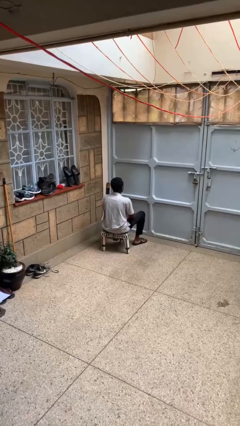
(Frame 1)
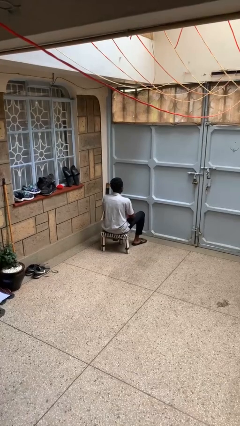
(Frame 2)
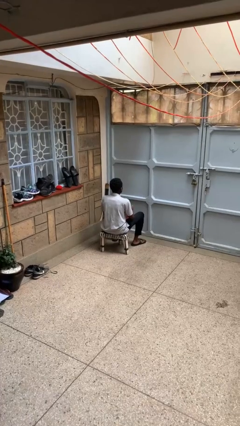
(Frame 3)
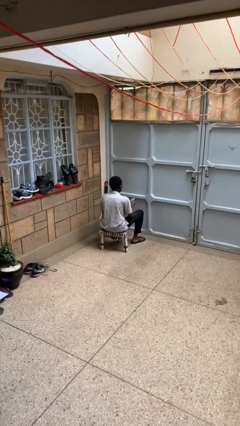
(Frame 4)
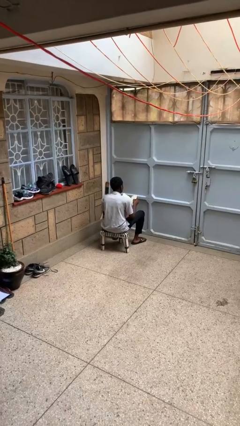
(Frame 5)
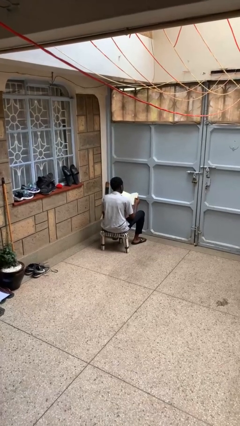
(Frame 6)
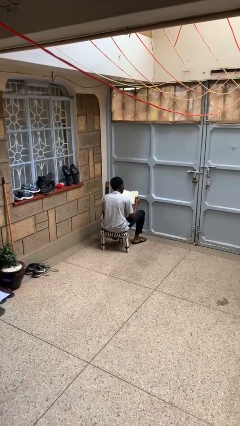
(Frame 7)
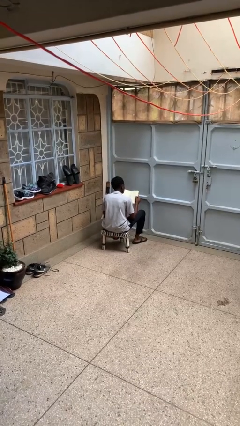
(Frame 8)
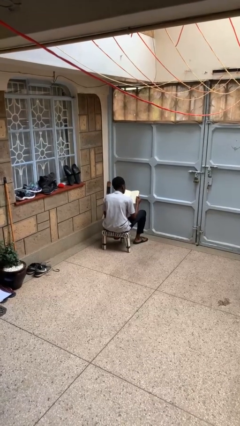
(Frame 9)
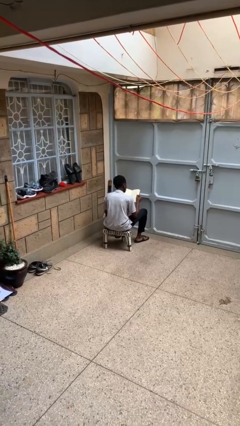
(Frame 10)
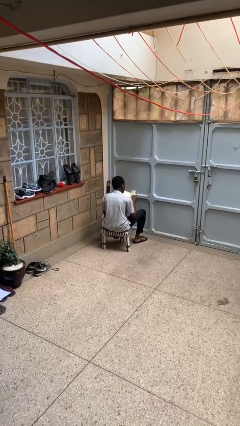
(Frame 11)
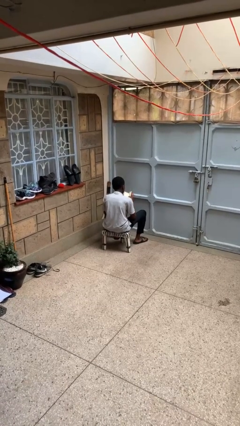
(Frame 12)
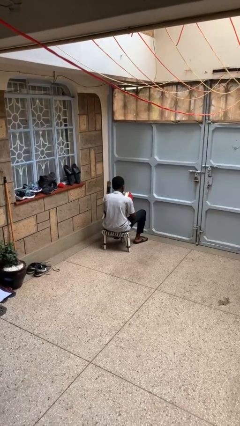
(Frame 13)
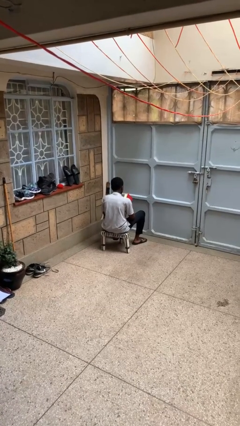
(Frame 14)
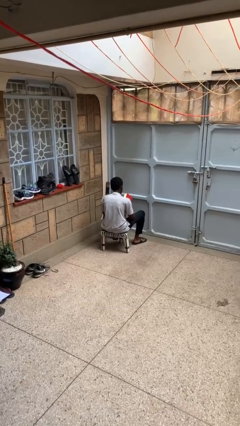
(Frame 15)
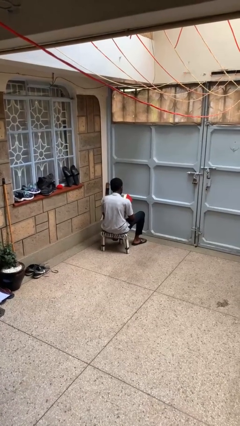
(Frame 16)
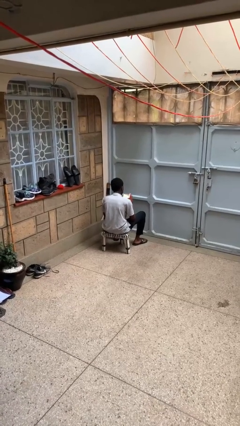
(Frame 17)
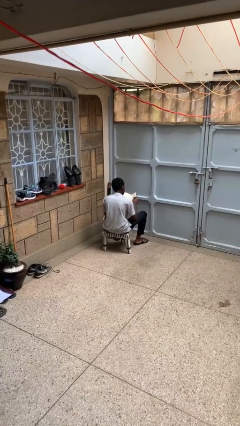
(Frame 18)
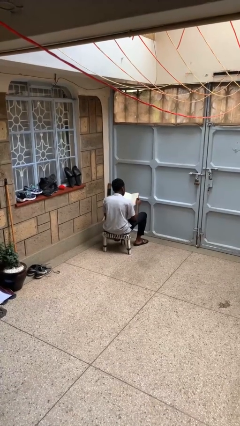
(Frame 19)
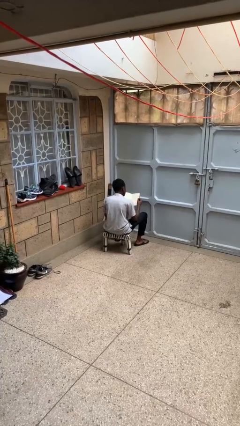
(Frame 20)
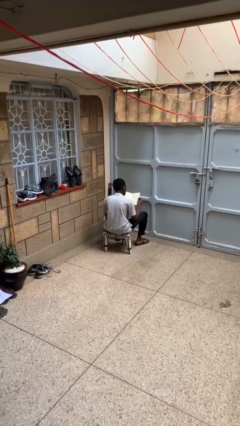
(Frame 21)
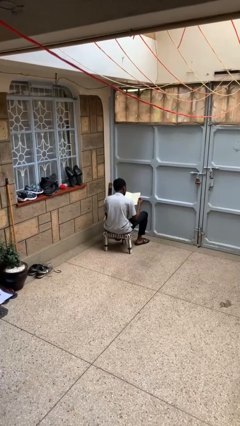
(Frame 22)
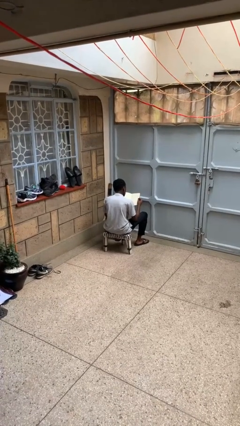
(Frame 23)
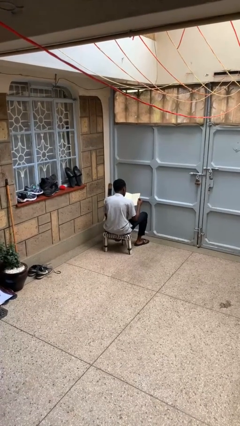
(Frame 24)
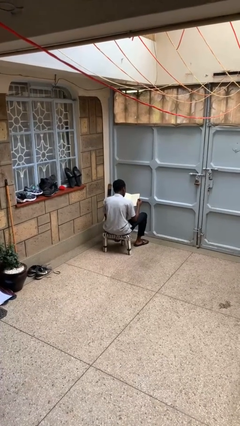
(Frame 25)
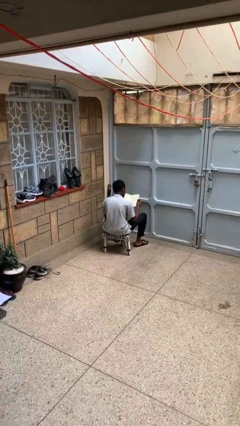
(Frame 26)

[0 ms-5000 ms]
person reads book

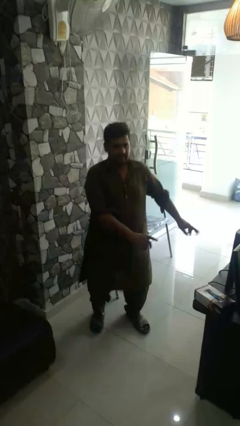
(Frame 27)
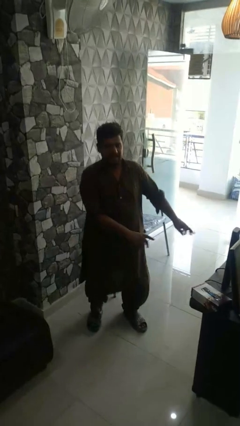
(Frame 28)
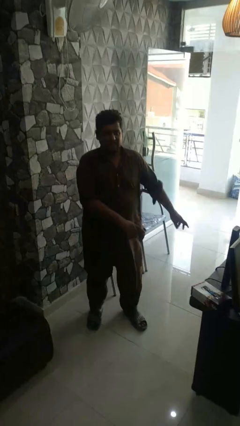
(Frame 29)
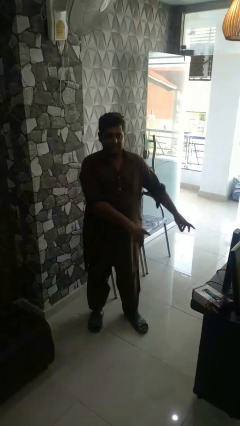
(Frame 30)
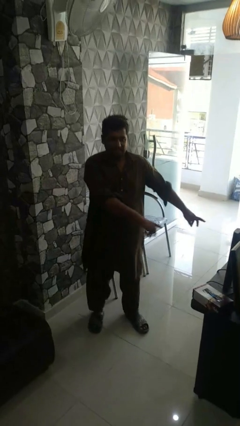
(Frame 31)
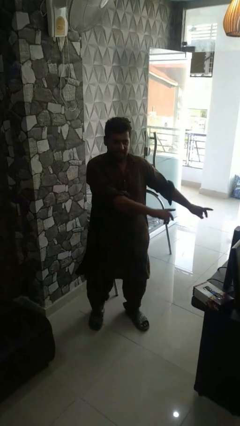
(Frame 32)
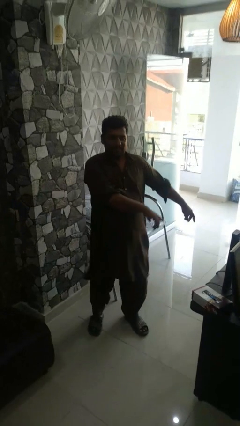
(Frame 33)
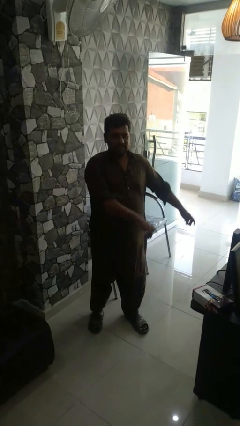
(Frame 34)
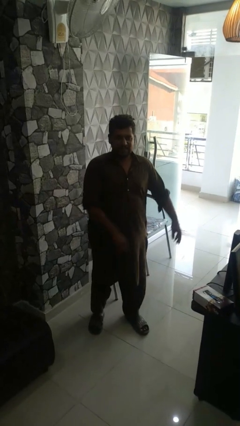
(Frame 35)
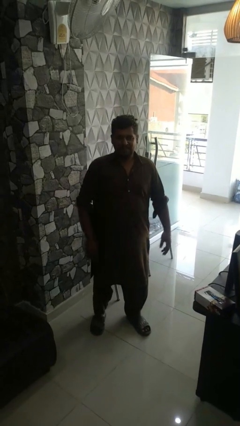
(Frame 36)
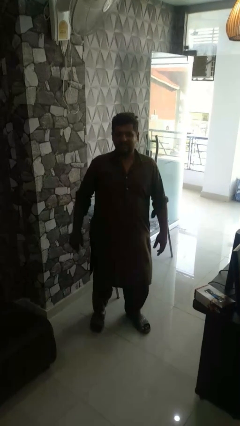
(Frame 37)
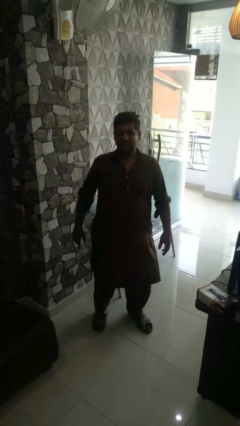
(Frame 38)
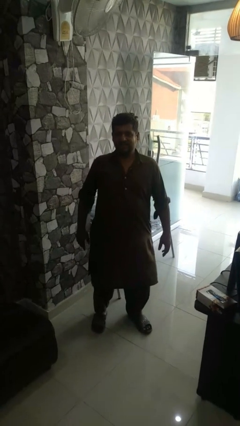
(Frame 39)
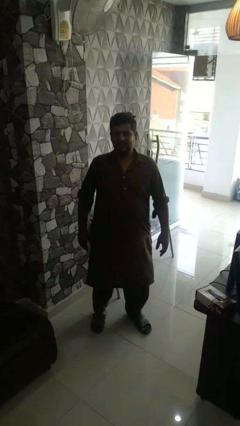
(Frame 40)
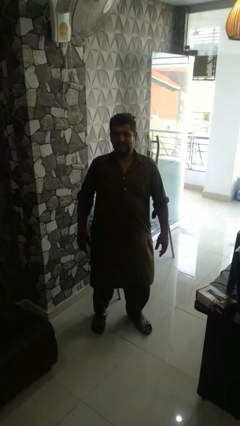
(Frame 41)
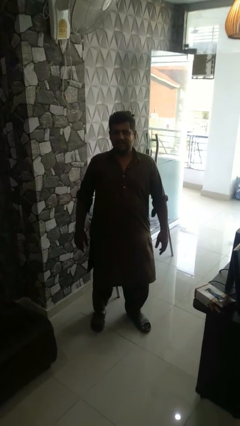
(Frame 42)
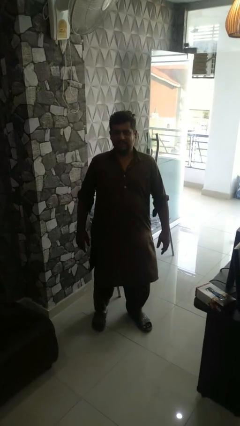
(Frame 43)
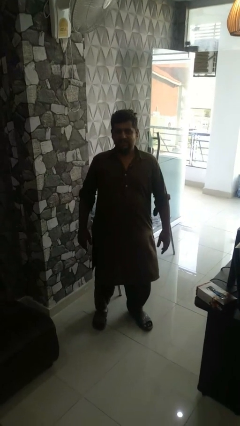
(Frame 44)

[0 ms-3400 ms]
person dances in place

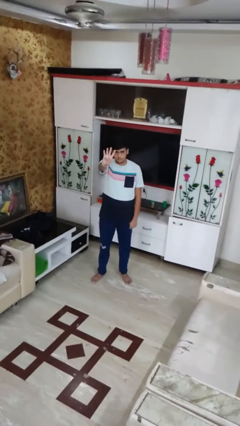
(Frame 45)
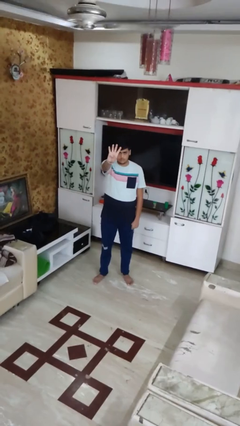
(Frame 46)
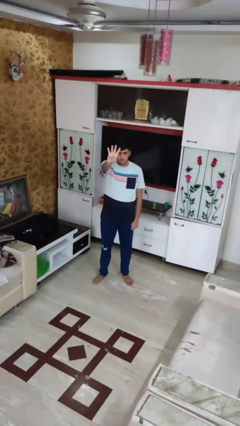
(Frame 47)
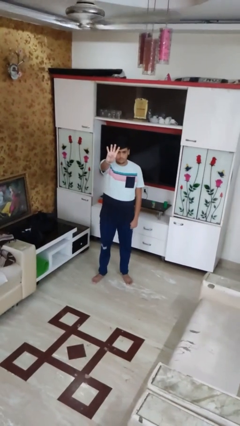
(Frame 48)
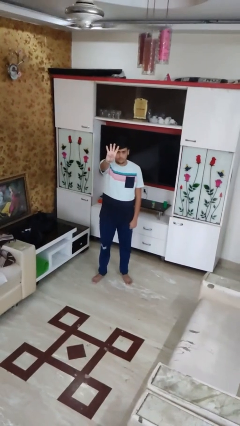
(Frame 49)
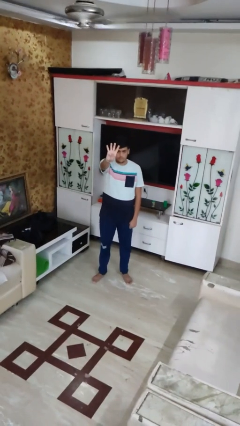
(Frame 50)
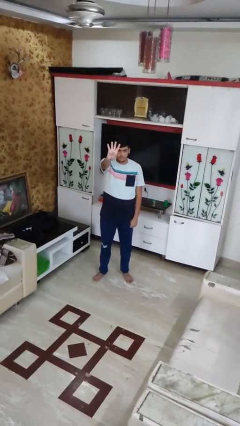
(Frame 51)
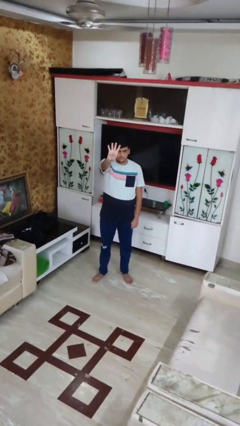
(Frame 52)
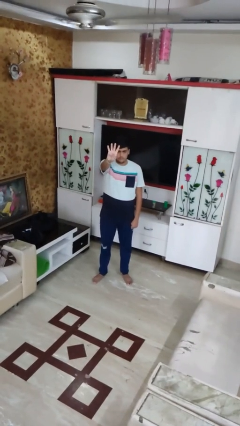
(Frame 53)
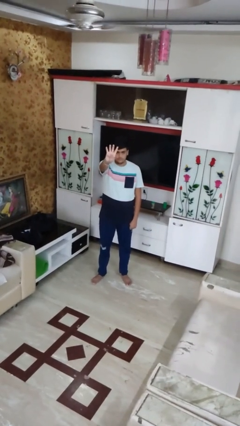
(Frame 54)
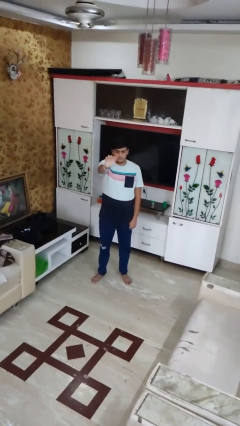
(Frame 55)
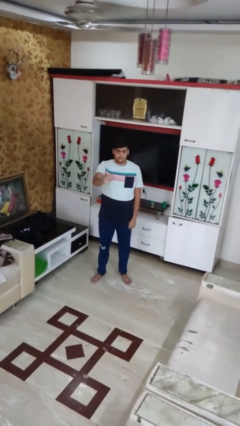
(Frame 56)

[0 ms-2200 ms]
person gestures number four

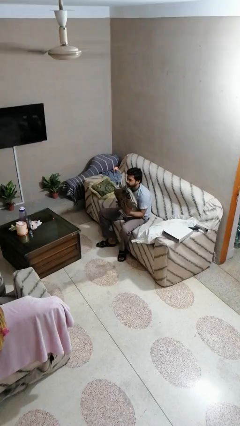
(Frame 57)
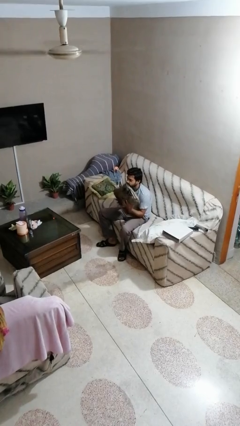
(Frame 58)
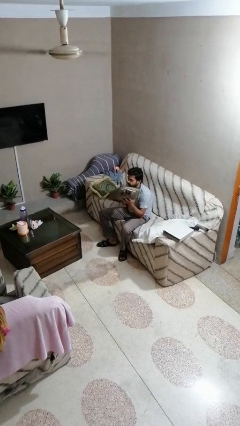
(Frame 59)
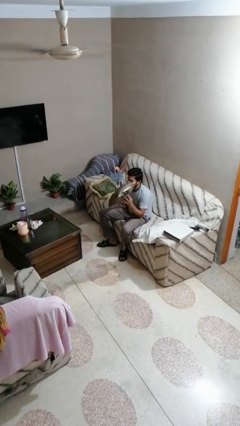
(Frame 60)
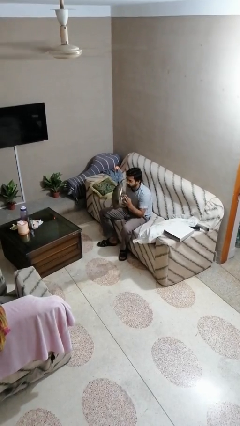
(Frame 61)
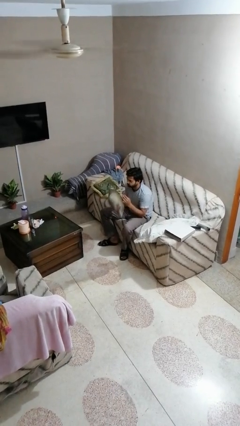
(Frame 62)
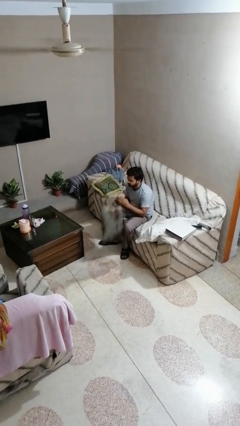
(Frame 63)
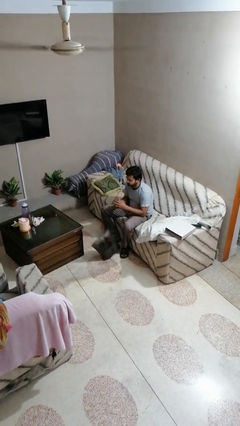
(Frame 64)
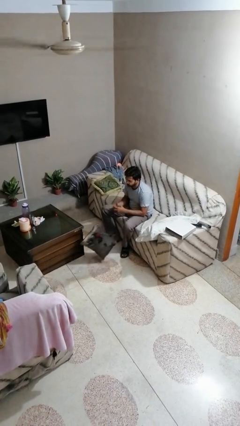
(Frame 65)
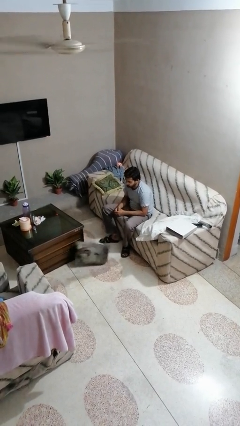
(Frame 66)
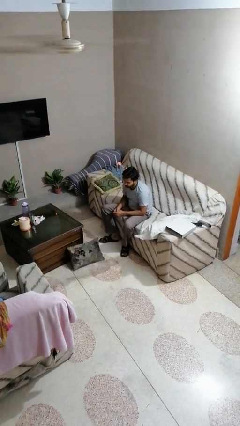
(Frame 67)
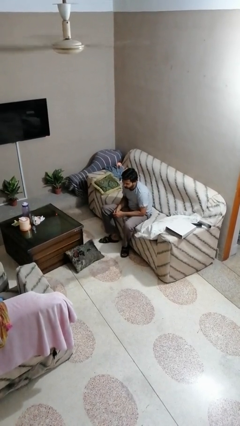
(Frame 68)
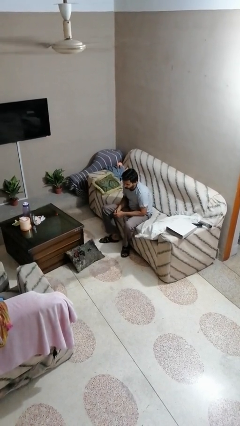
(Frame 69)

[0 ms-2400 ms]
person drops object

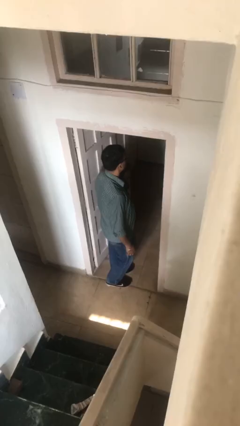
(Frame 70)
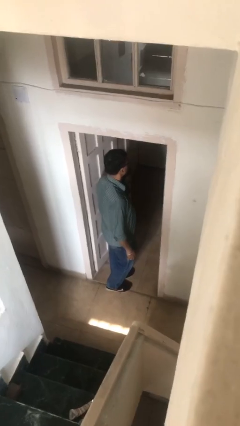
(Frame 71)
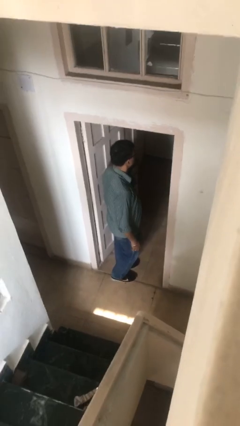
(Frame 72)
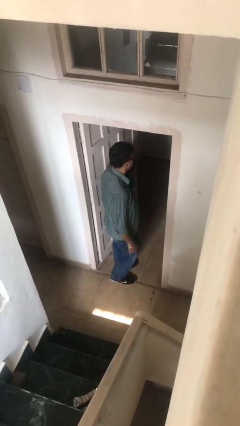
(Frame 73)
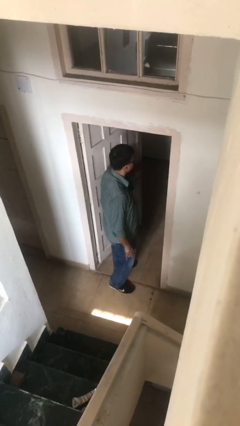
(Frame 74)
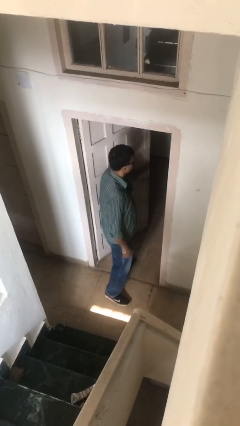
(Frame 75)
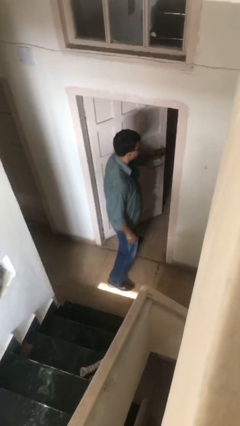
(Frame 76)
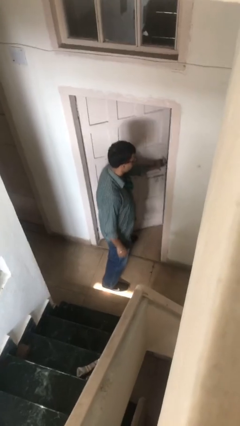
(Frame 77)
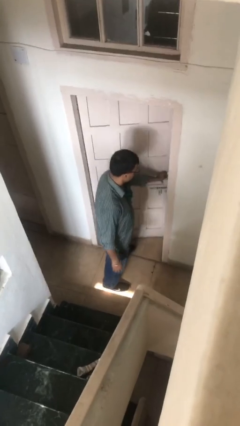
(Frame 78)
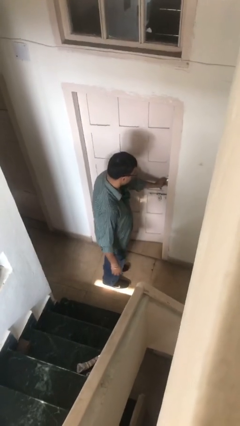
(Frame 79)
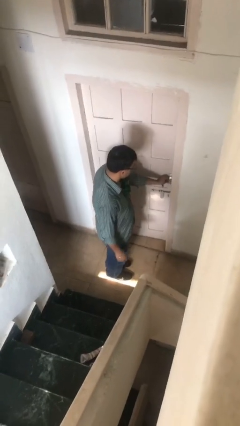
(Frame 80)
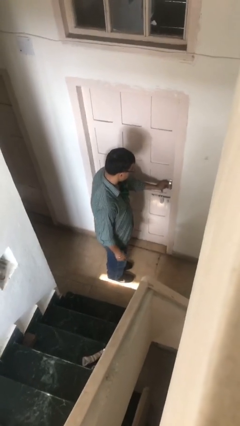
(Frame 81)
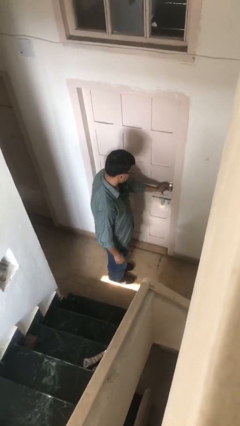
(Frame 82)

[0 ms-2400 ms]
person closes facility door

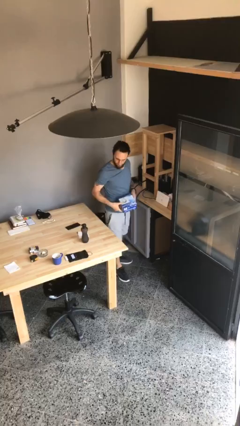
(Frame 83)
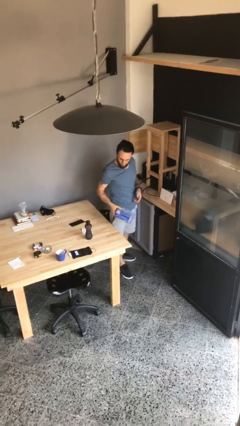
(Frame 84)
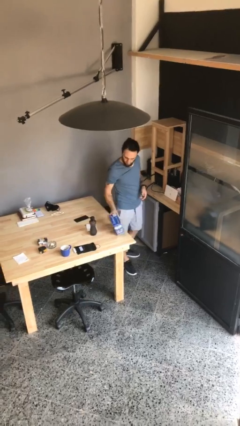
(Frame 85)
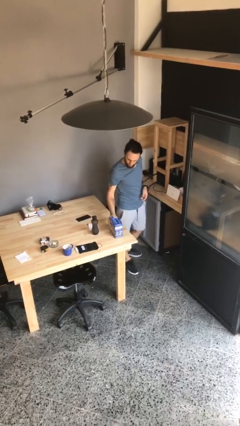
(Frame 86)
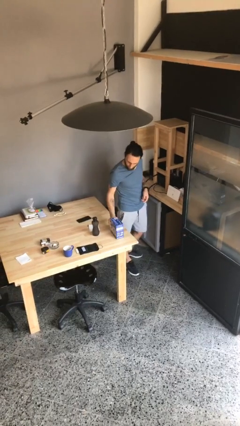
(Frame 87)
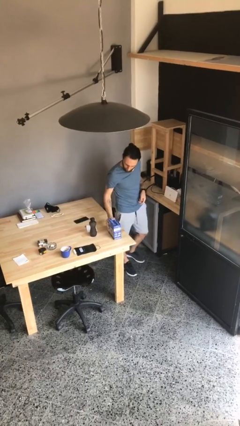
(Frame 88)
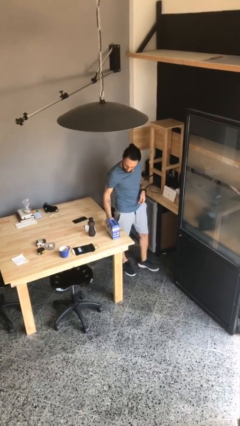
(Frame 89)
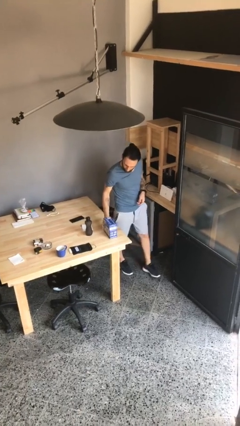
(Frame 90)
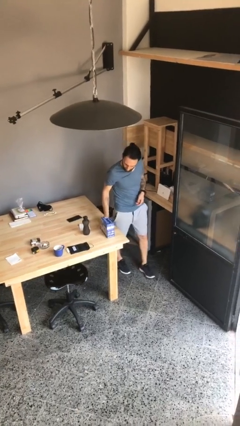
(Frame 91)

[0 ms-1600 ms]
person puts down object on table

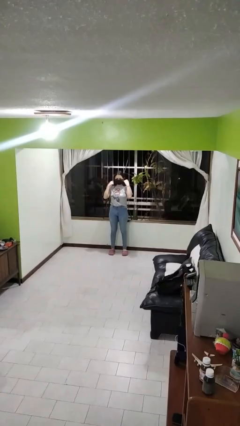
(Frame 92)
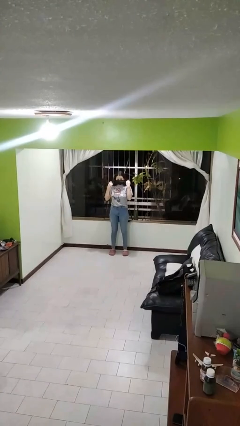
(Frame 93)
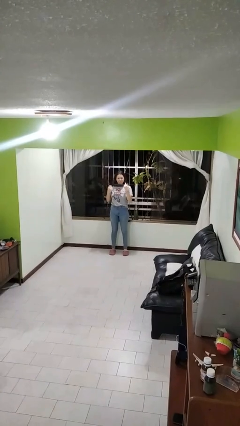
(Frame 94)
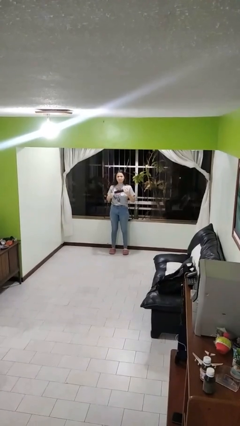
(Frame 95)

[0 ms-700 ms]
person takes off facemask
